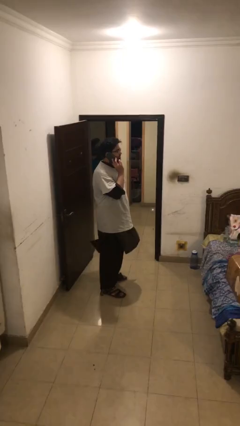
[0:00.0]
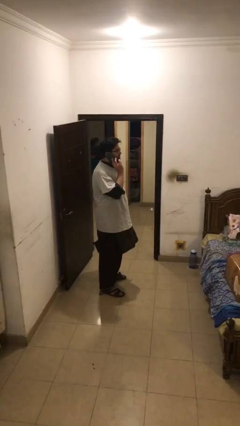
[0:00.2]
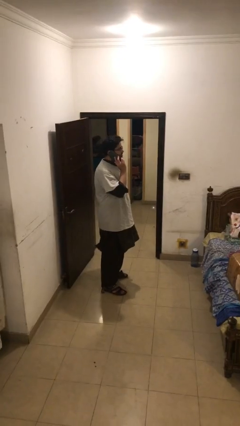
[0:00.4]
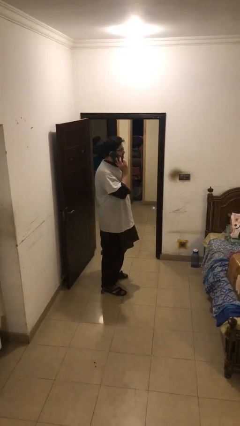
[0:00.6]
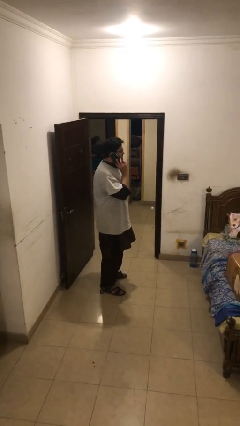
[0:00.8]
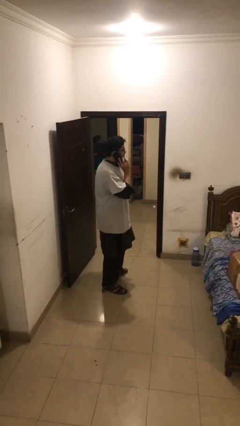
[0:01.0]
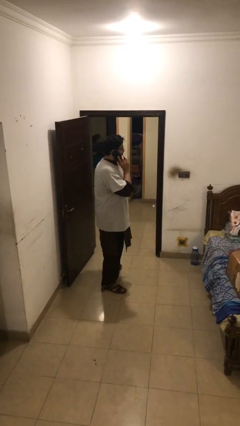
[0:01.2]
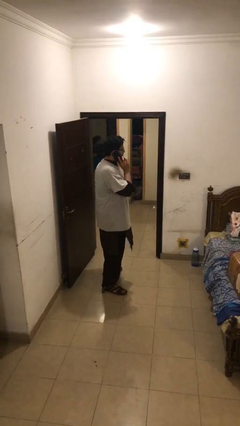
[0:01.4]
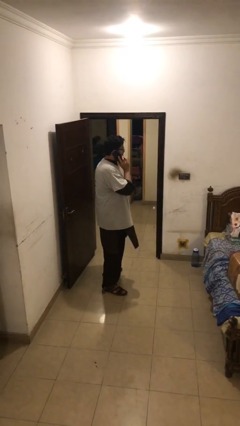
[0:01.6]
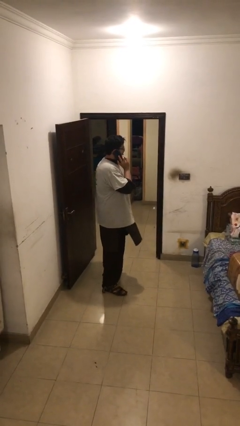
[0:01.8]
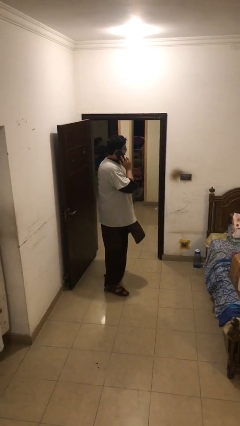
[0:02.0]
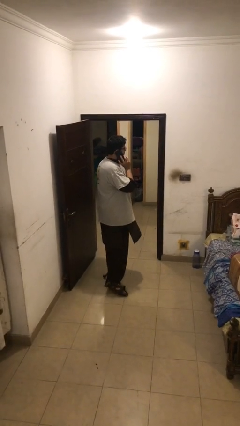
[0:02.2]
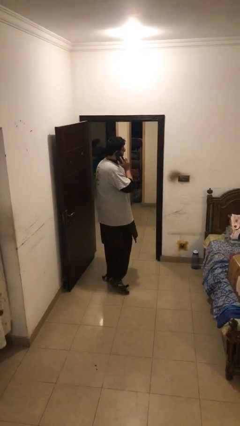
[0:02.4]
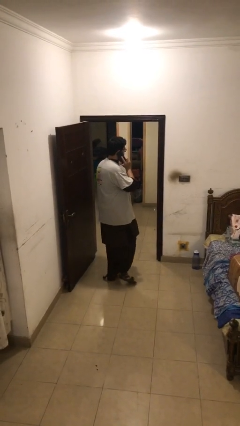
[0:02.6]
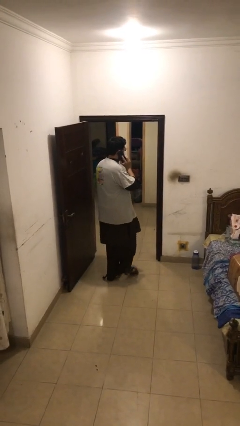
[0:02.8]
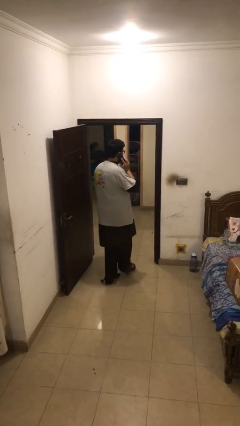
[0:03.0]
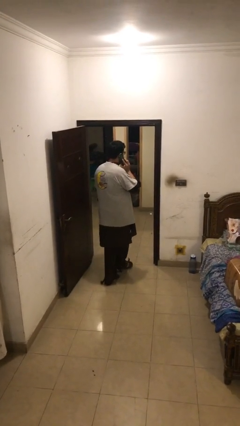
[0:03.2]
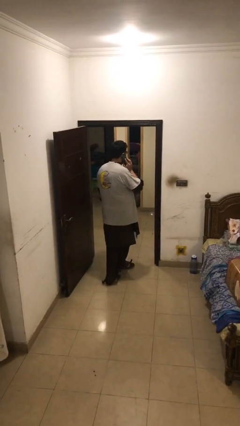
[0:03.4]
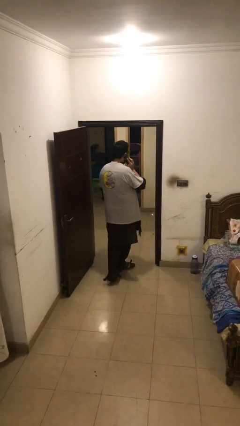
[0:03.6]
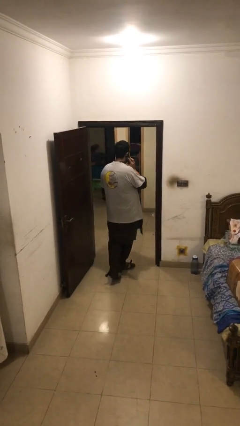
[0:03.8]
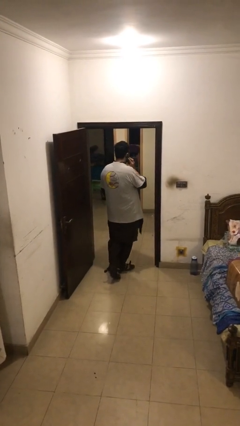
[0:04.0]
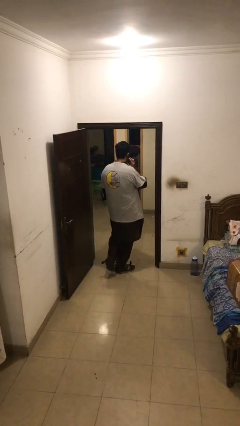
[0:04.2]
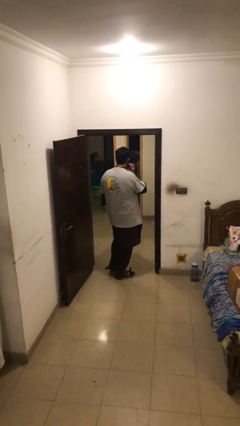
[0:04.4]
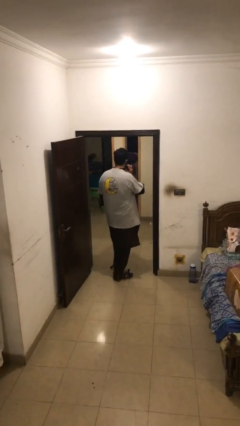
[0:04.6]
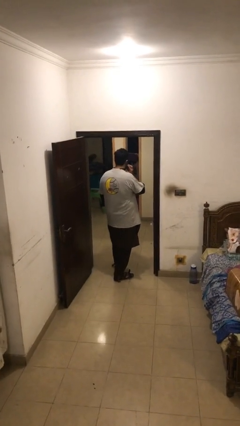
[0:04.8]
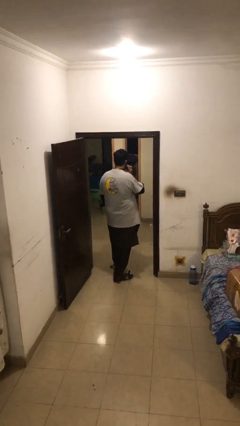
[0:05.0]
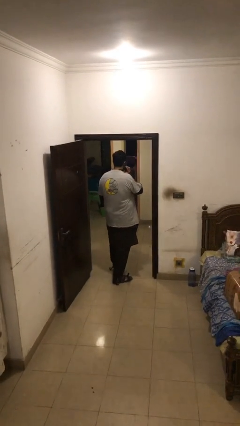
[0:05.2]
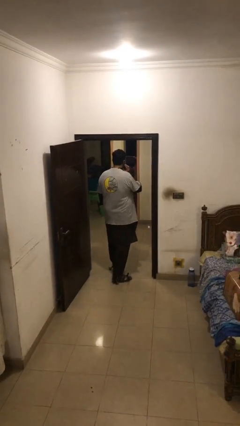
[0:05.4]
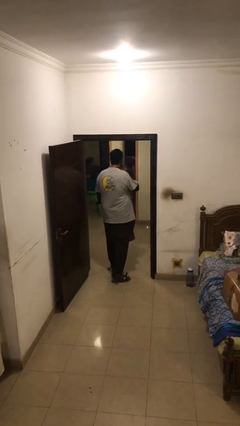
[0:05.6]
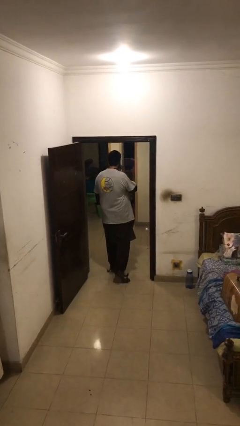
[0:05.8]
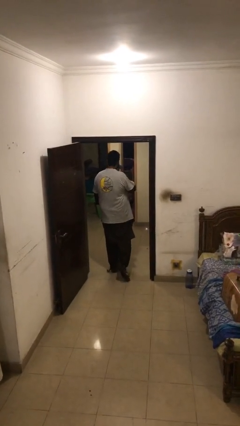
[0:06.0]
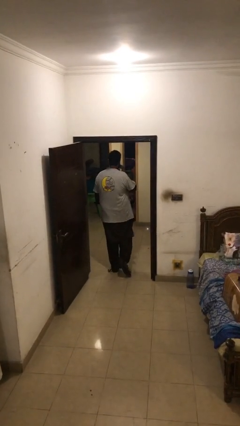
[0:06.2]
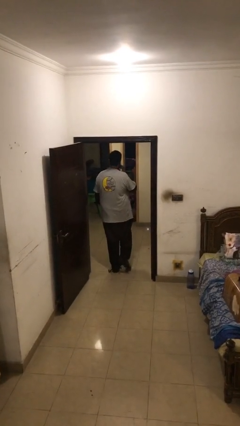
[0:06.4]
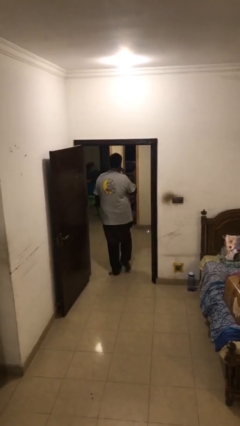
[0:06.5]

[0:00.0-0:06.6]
person exits scene through structure

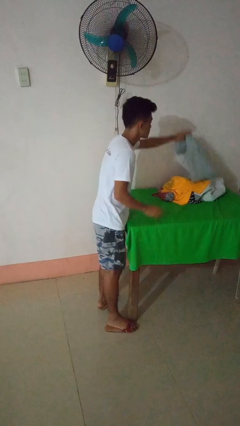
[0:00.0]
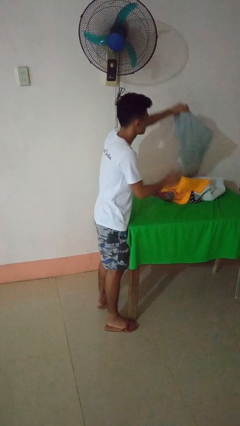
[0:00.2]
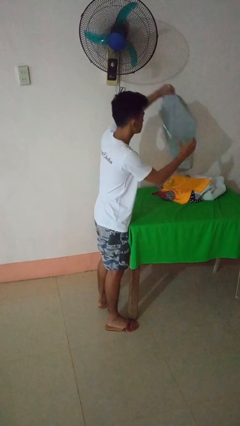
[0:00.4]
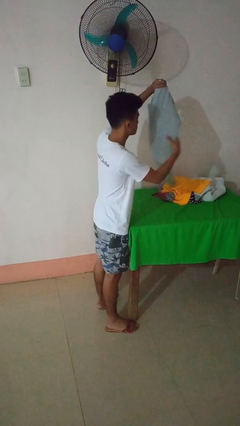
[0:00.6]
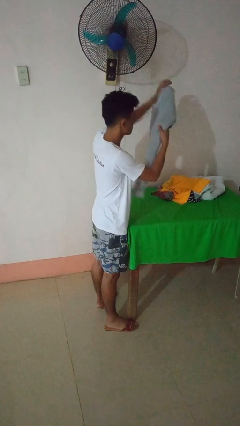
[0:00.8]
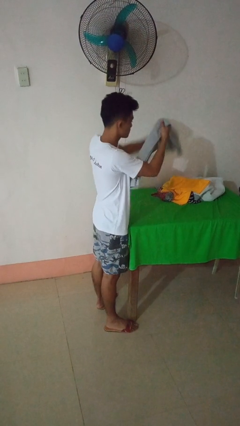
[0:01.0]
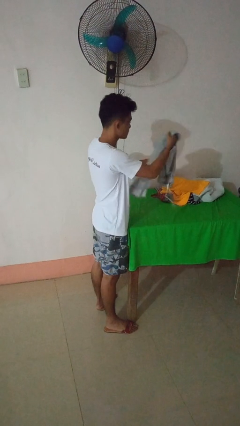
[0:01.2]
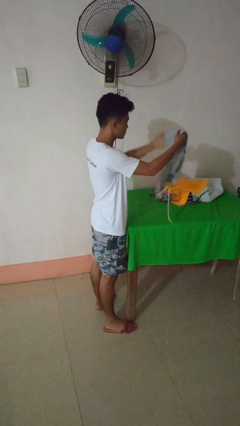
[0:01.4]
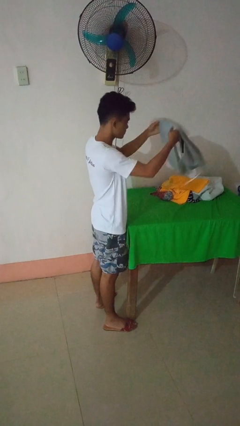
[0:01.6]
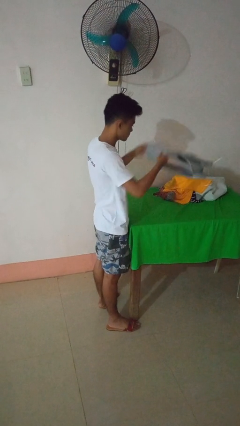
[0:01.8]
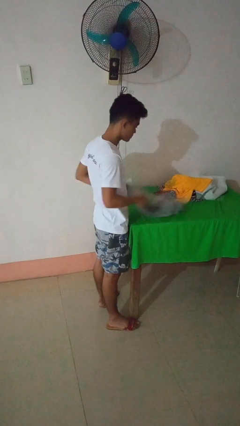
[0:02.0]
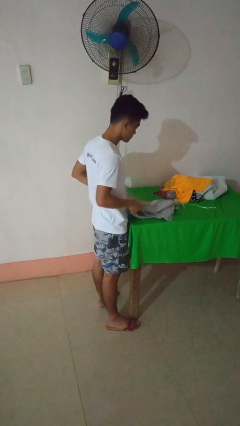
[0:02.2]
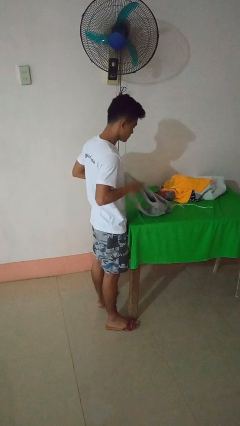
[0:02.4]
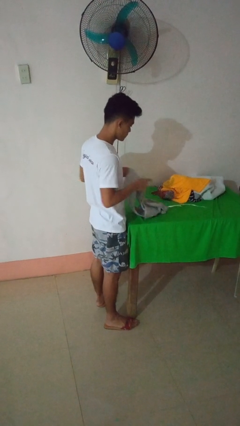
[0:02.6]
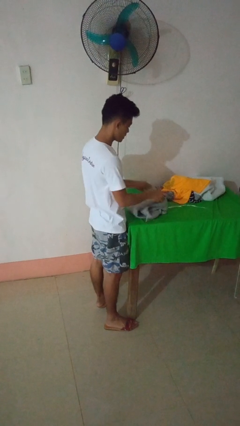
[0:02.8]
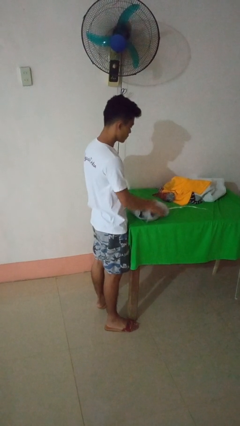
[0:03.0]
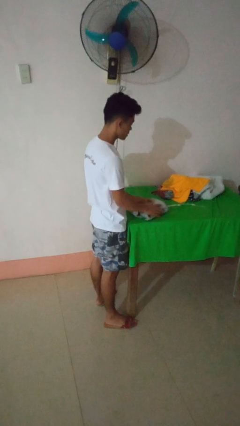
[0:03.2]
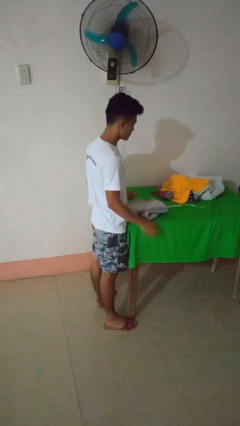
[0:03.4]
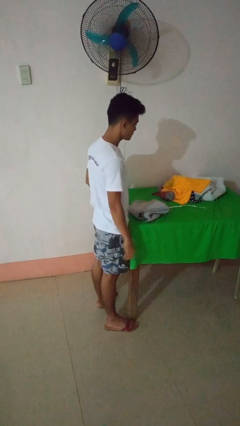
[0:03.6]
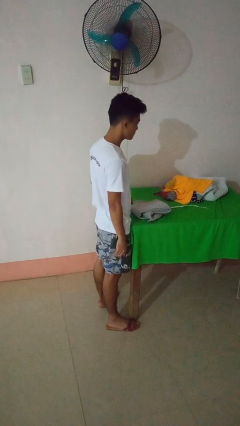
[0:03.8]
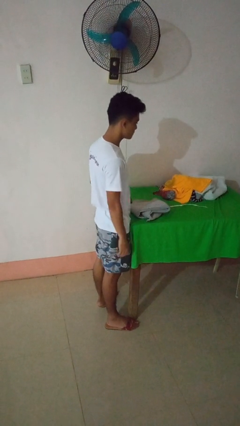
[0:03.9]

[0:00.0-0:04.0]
person folds pants

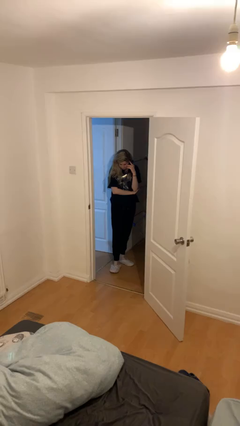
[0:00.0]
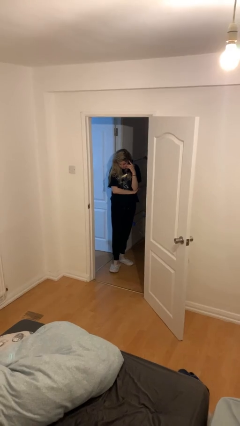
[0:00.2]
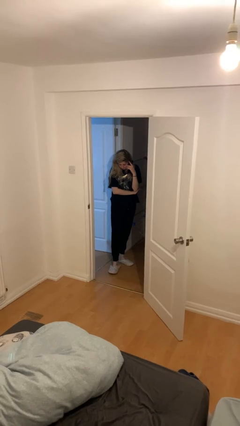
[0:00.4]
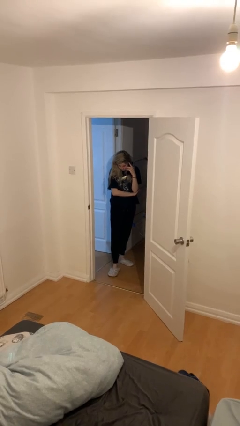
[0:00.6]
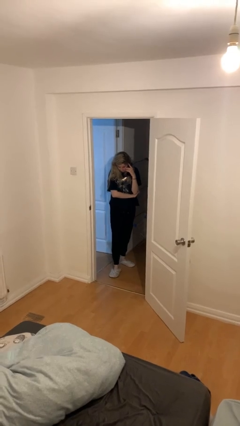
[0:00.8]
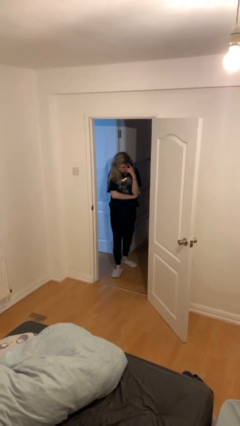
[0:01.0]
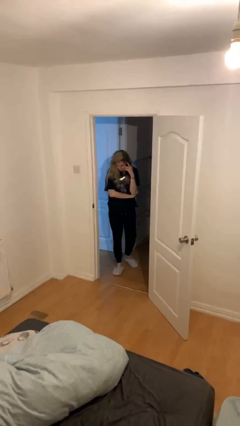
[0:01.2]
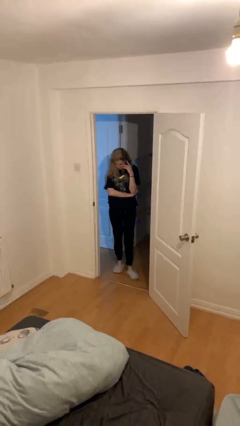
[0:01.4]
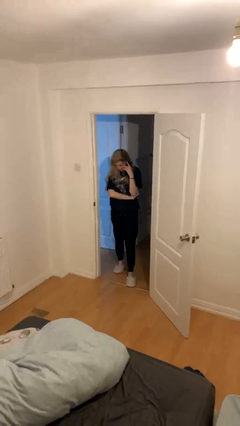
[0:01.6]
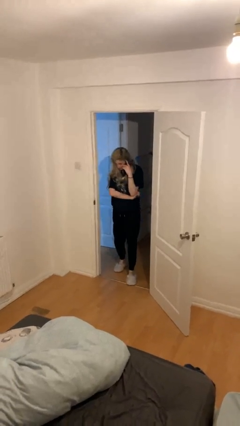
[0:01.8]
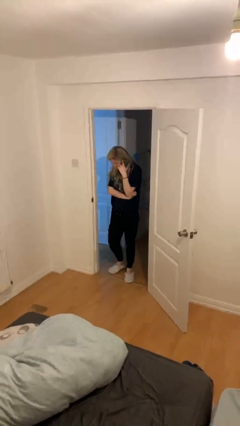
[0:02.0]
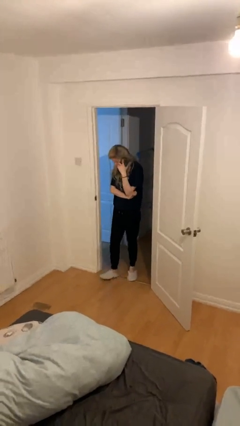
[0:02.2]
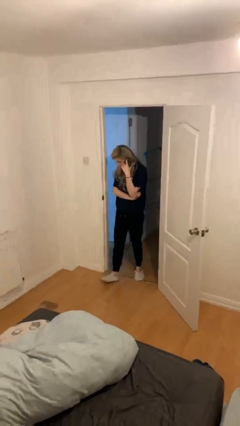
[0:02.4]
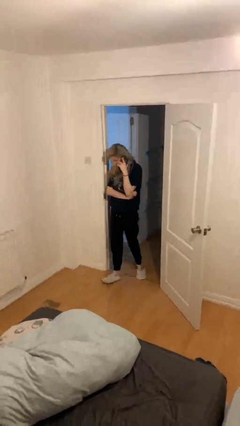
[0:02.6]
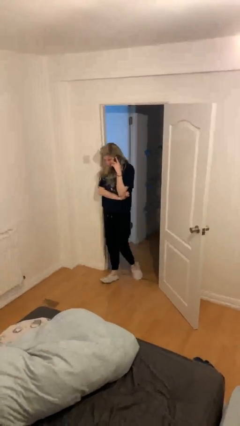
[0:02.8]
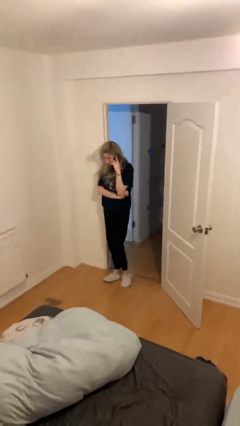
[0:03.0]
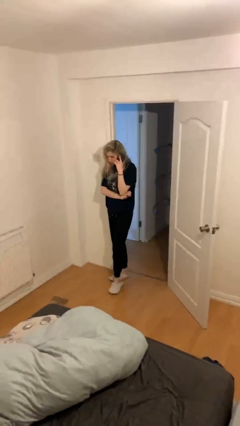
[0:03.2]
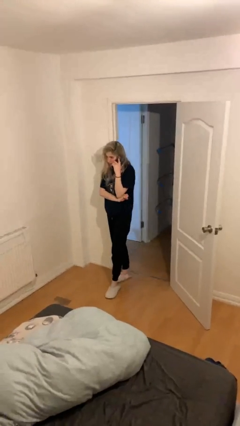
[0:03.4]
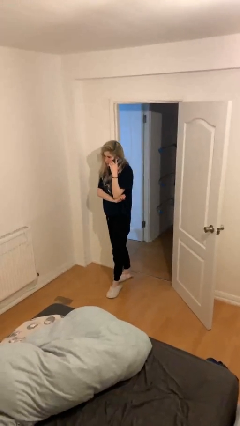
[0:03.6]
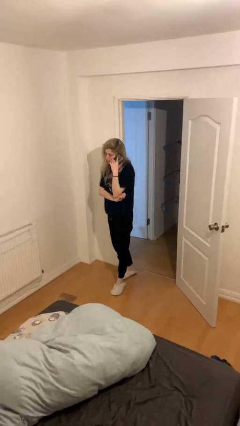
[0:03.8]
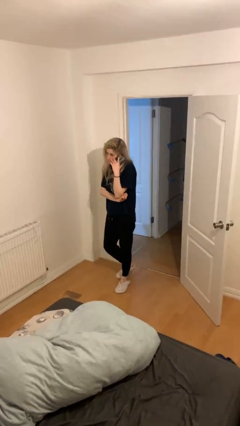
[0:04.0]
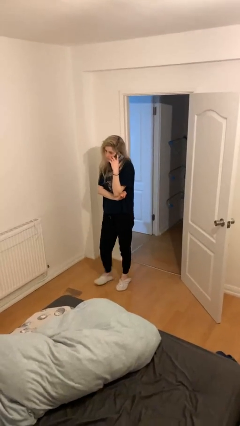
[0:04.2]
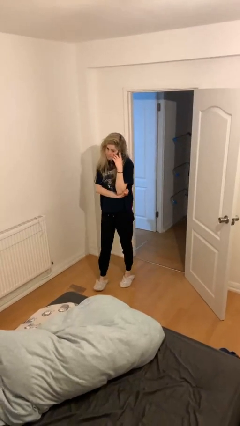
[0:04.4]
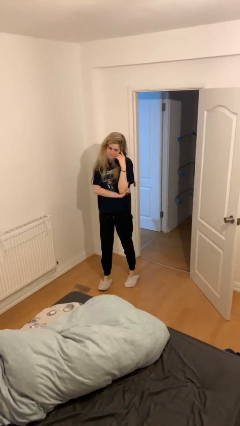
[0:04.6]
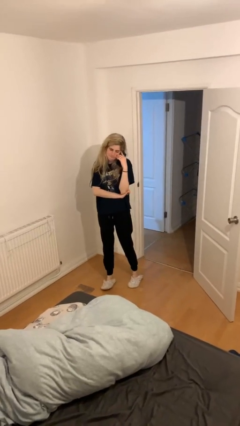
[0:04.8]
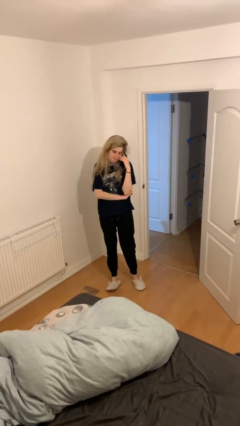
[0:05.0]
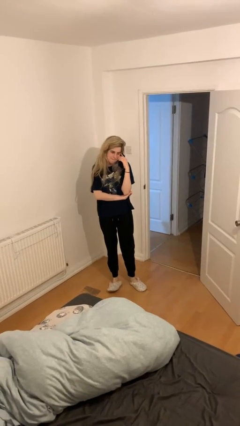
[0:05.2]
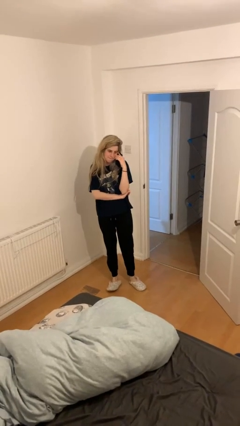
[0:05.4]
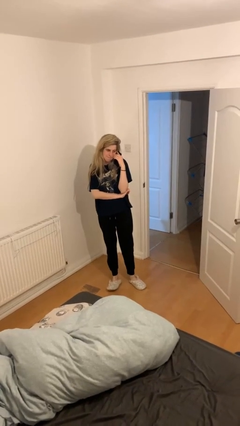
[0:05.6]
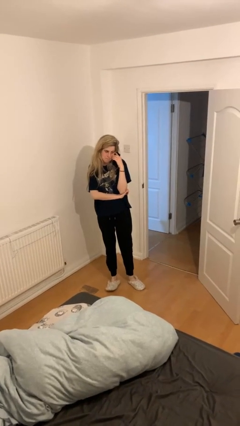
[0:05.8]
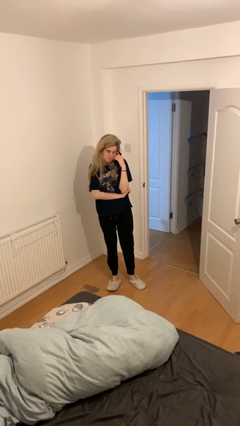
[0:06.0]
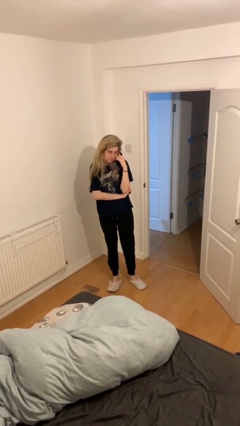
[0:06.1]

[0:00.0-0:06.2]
person enters scene through structure

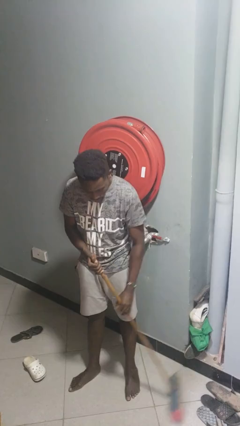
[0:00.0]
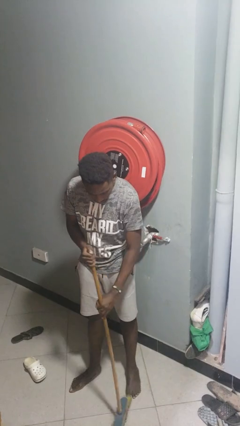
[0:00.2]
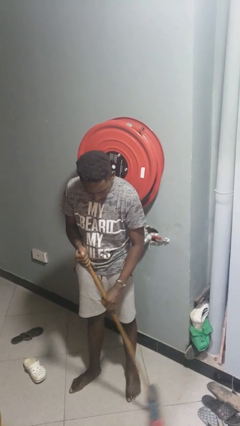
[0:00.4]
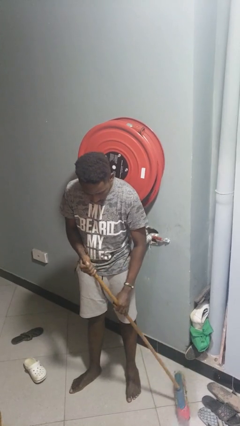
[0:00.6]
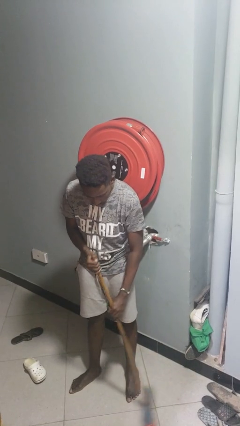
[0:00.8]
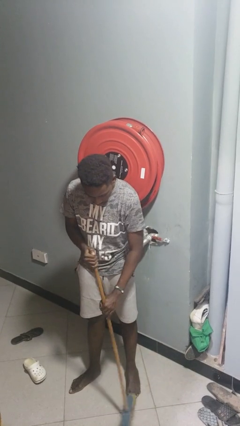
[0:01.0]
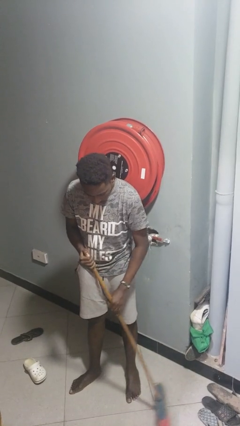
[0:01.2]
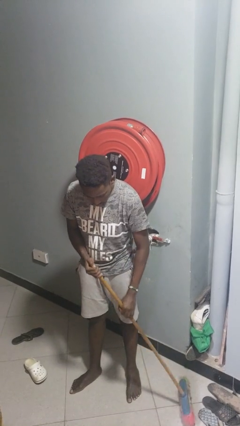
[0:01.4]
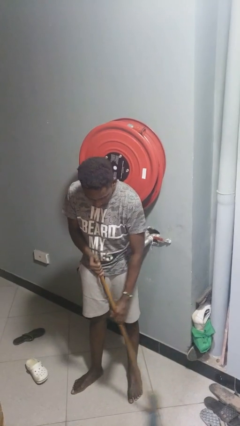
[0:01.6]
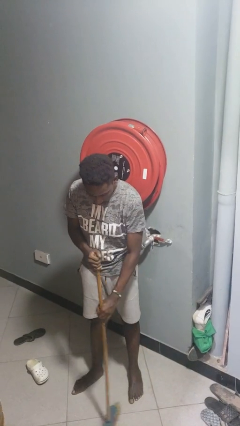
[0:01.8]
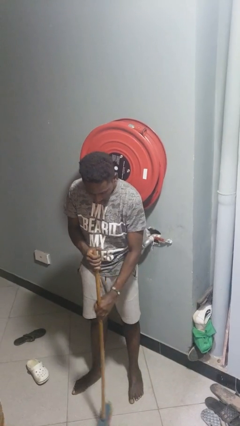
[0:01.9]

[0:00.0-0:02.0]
person sweeps floor
